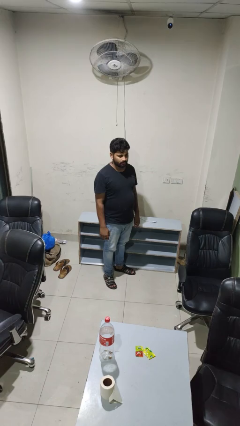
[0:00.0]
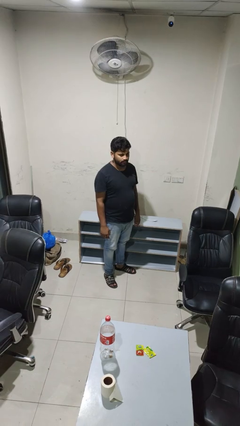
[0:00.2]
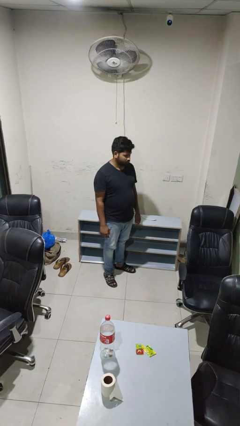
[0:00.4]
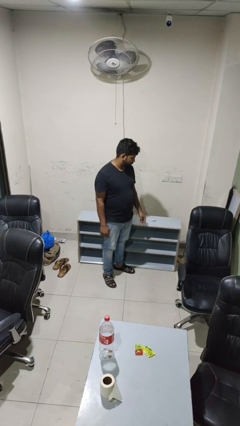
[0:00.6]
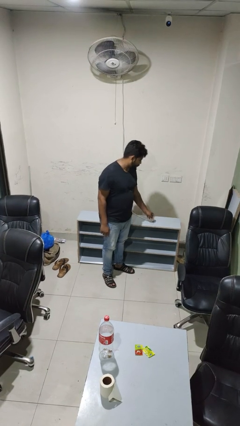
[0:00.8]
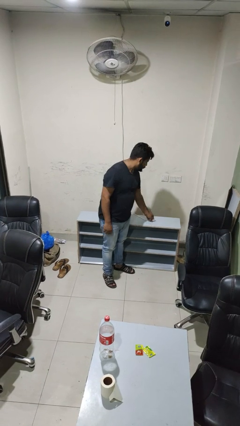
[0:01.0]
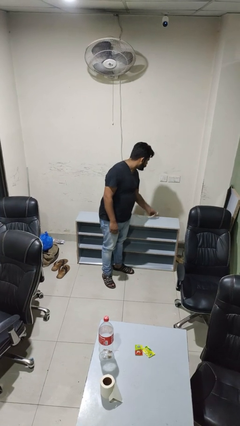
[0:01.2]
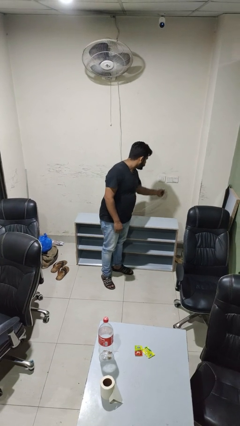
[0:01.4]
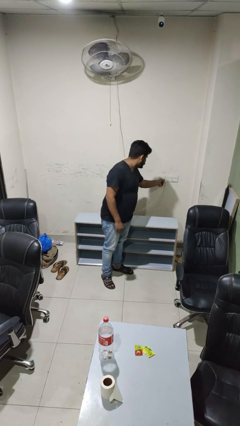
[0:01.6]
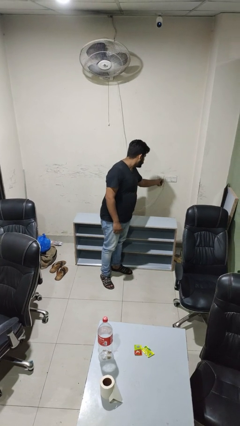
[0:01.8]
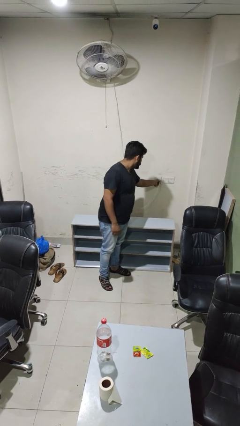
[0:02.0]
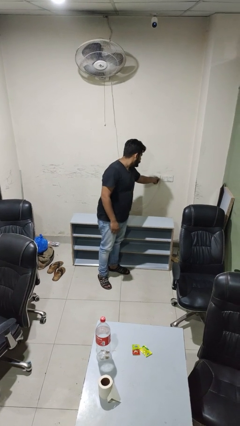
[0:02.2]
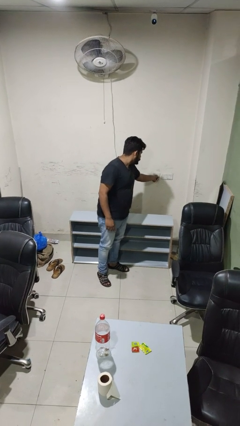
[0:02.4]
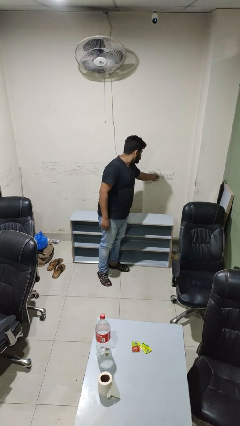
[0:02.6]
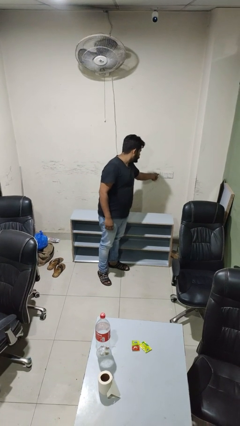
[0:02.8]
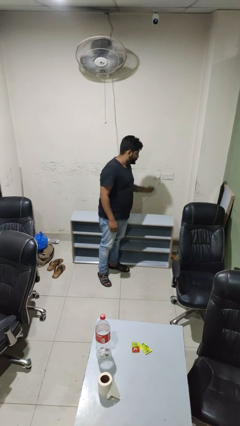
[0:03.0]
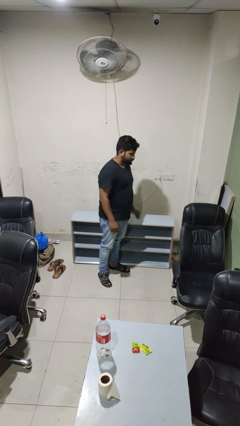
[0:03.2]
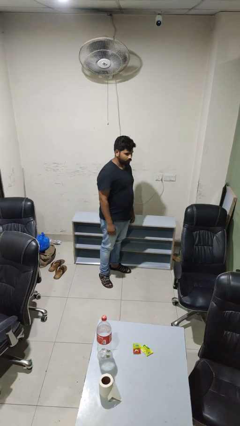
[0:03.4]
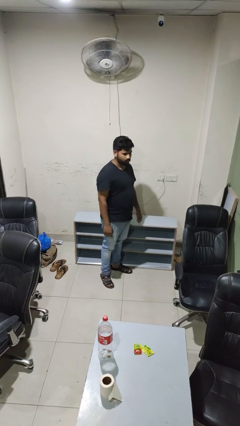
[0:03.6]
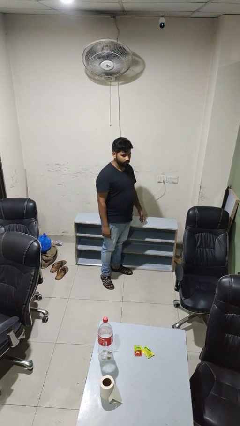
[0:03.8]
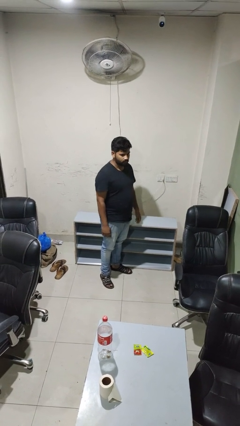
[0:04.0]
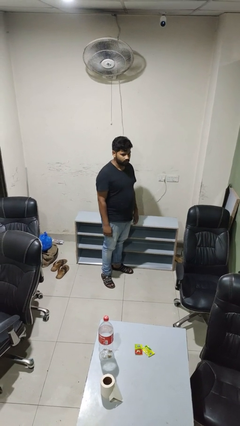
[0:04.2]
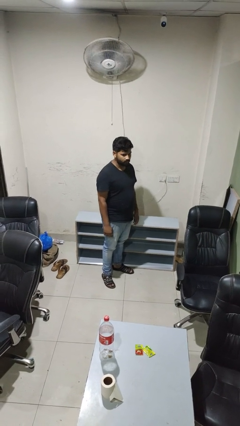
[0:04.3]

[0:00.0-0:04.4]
person plugs into electrical socket

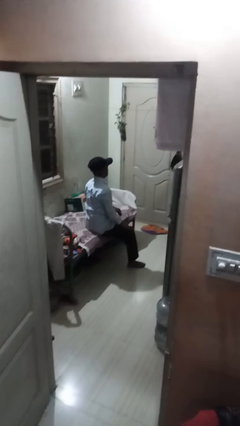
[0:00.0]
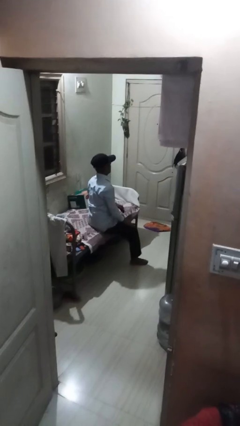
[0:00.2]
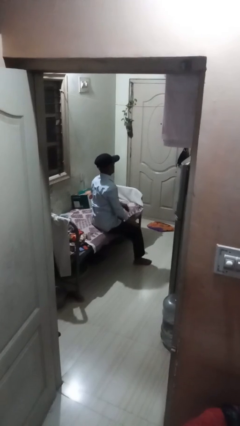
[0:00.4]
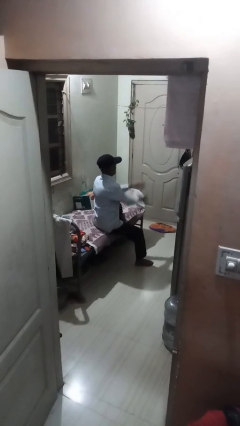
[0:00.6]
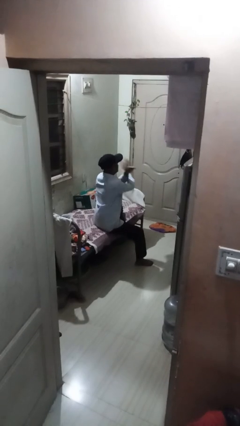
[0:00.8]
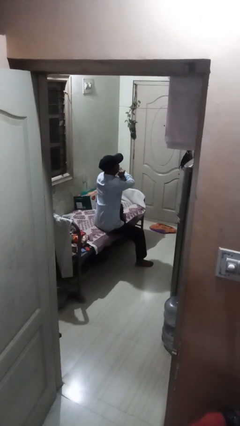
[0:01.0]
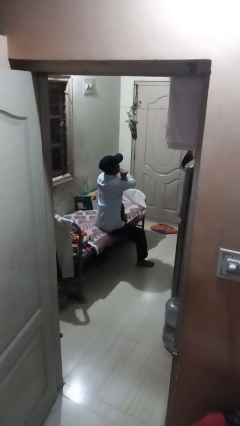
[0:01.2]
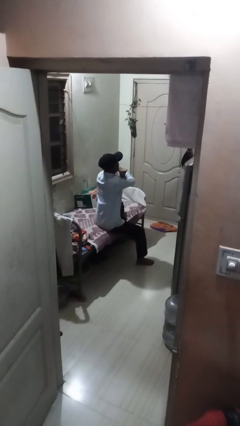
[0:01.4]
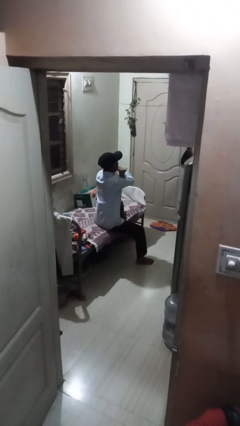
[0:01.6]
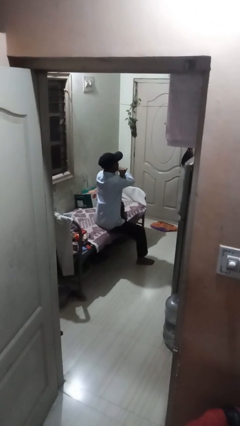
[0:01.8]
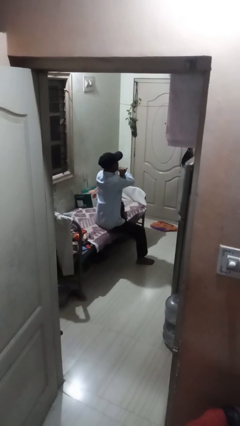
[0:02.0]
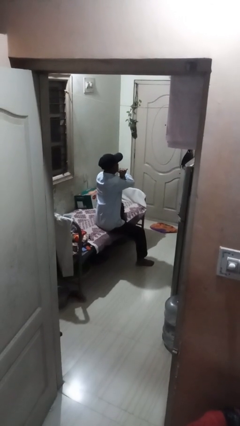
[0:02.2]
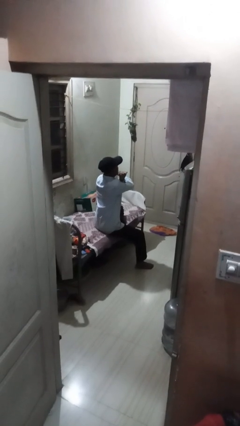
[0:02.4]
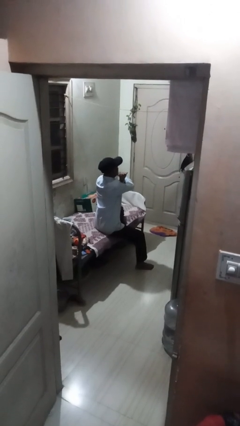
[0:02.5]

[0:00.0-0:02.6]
person gestures arms x

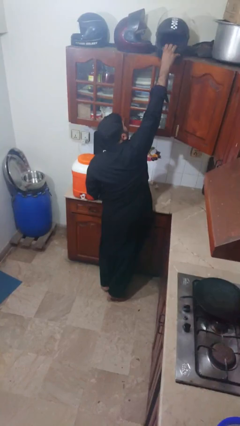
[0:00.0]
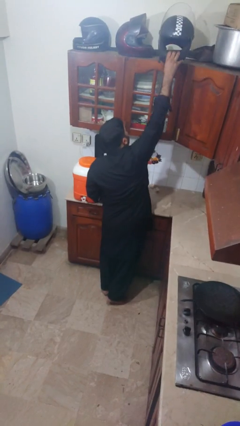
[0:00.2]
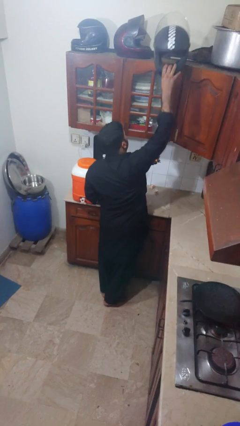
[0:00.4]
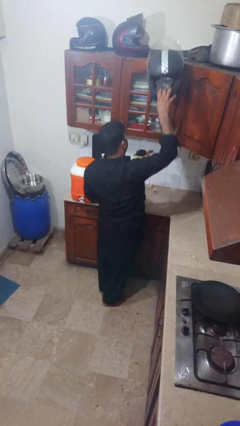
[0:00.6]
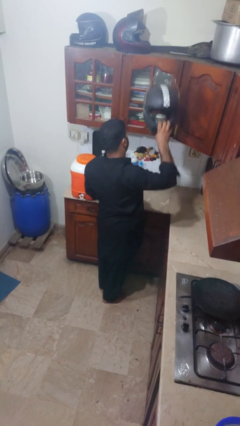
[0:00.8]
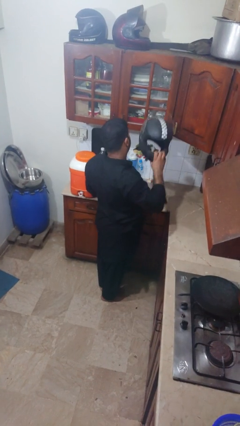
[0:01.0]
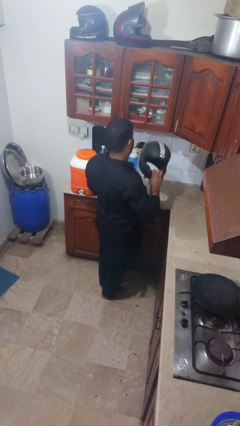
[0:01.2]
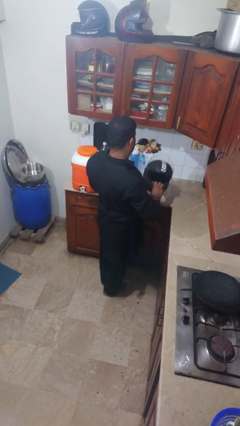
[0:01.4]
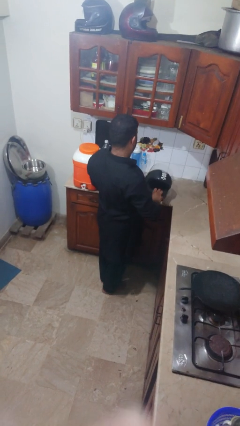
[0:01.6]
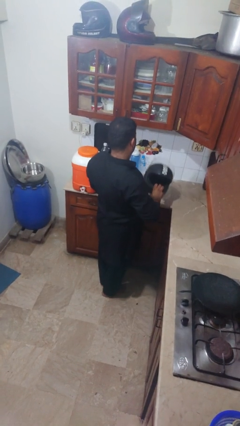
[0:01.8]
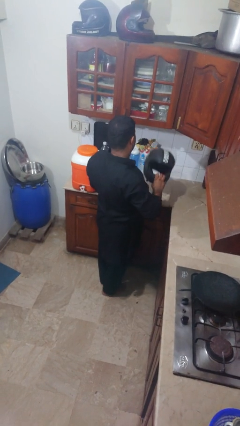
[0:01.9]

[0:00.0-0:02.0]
person picks up object from shelf

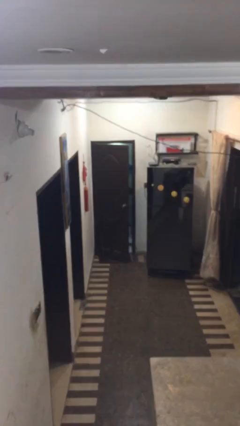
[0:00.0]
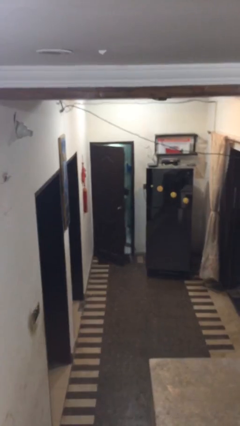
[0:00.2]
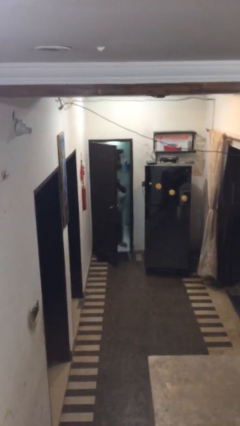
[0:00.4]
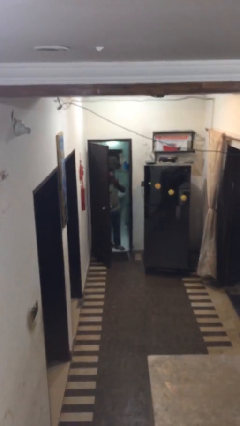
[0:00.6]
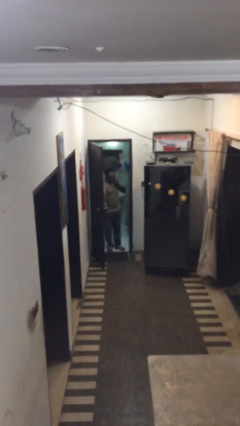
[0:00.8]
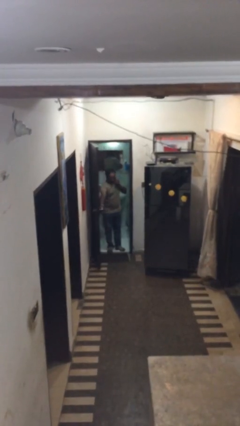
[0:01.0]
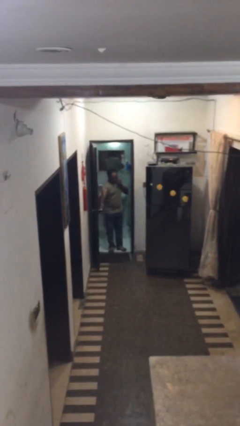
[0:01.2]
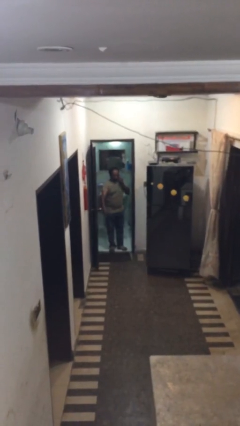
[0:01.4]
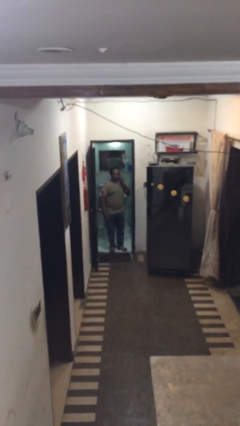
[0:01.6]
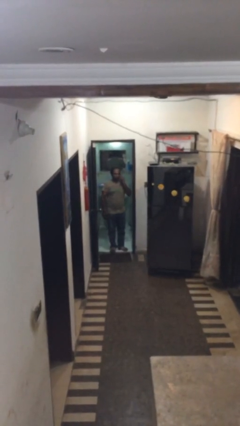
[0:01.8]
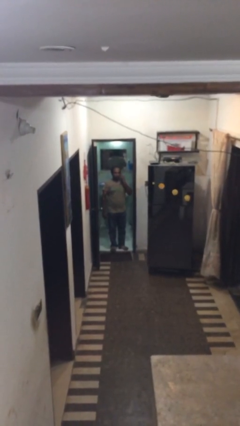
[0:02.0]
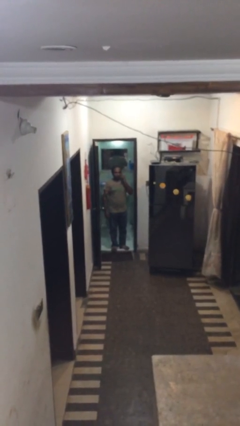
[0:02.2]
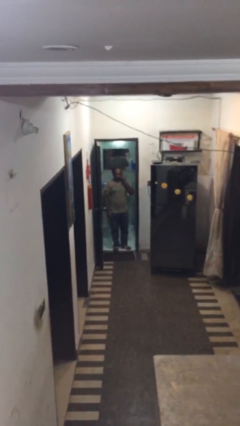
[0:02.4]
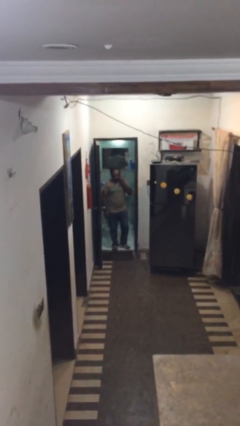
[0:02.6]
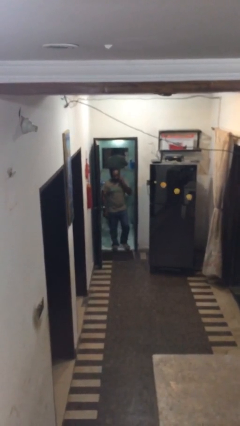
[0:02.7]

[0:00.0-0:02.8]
person opens facility door

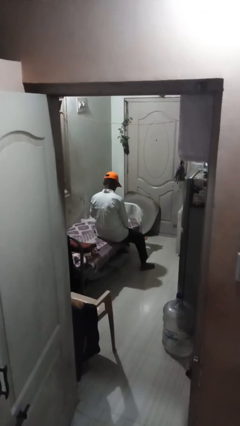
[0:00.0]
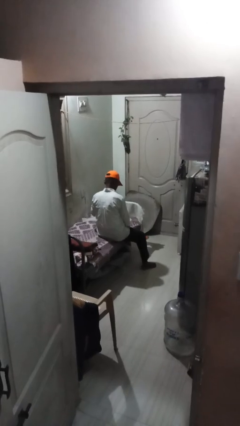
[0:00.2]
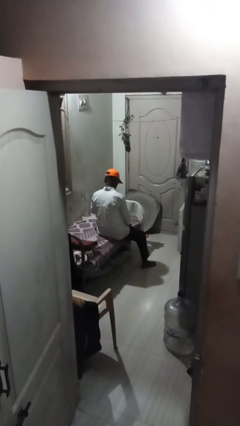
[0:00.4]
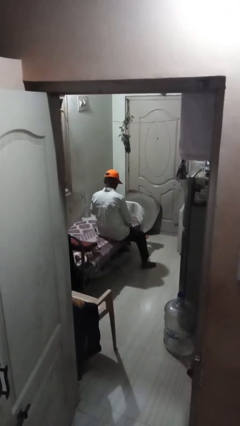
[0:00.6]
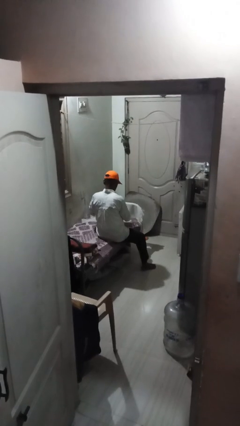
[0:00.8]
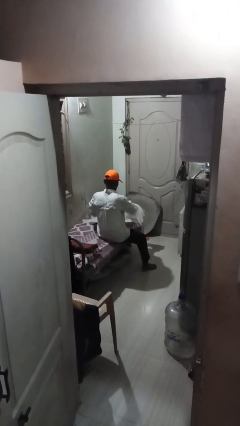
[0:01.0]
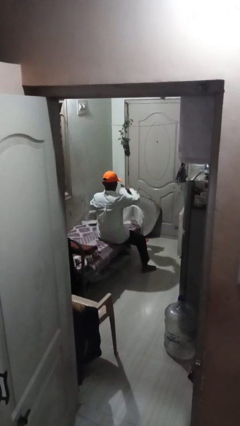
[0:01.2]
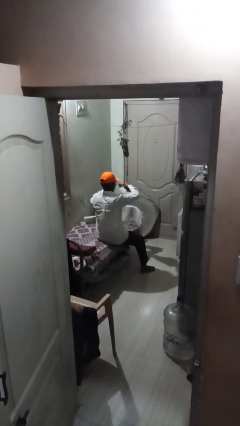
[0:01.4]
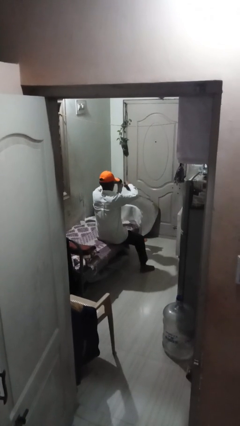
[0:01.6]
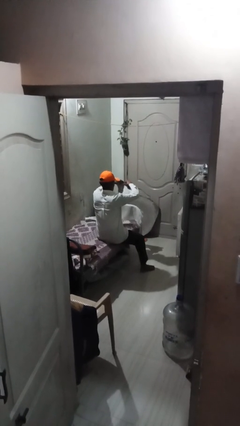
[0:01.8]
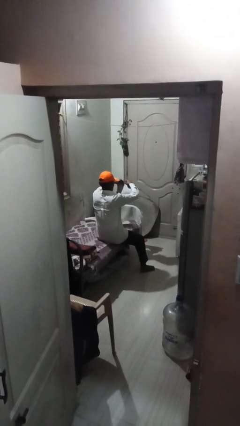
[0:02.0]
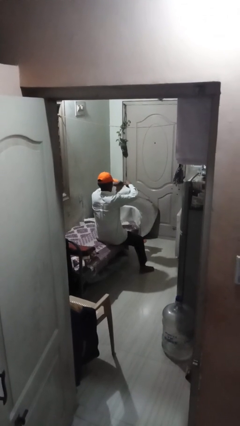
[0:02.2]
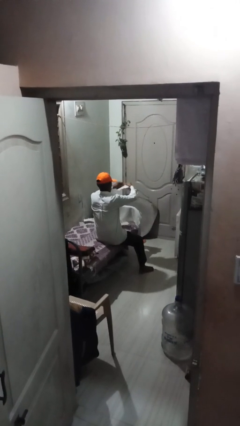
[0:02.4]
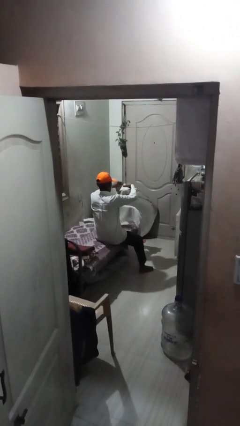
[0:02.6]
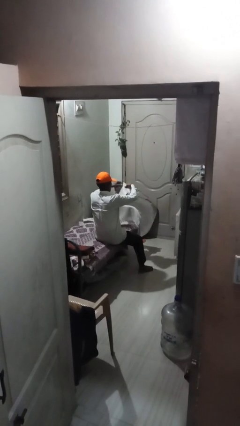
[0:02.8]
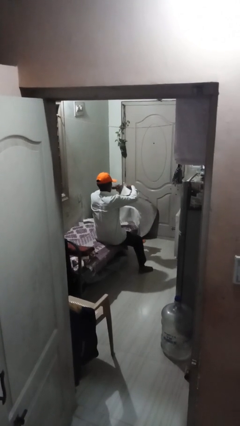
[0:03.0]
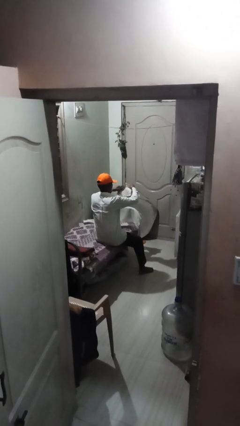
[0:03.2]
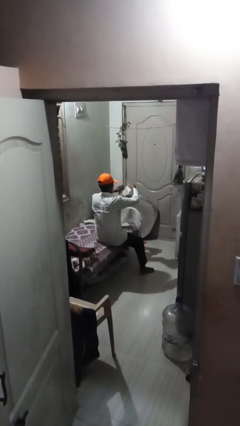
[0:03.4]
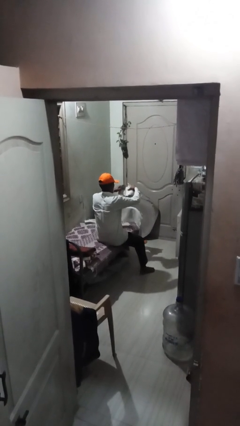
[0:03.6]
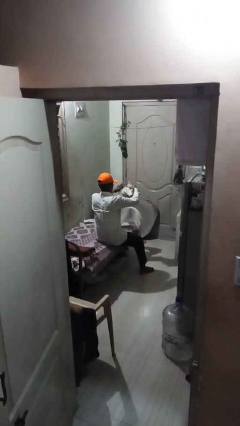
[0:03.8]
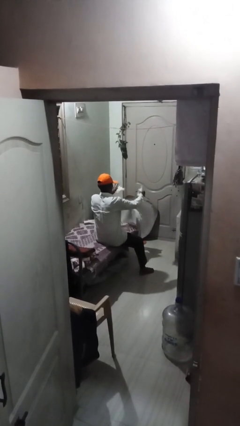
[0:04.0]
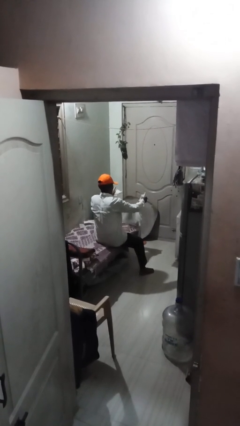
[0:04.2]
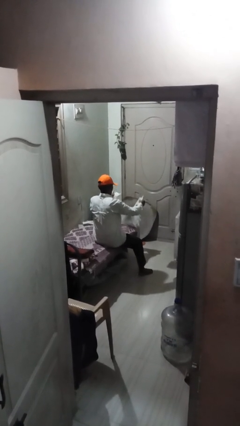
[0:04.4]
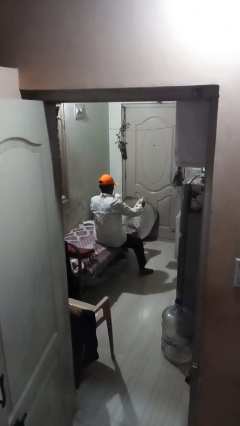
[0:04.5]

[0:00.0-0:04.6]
person tears paper

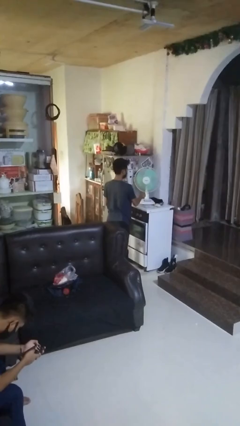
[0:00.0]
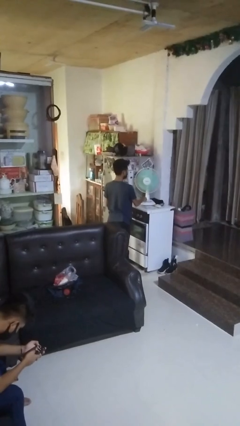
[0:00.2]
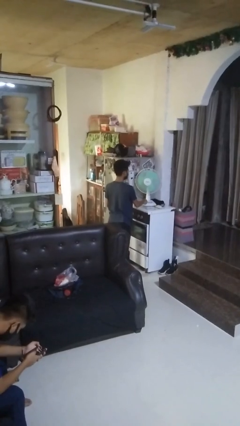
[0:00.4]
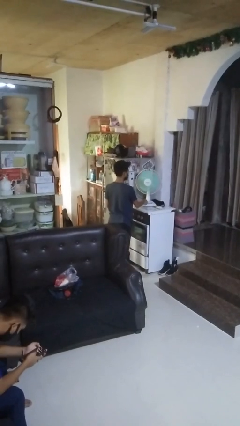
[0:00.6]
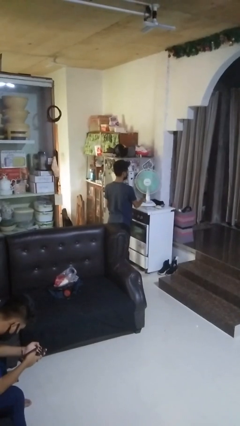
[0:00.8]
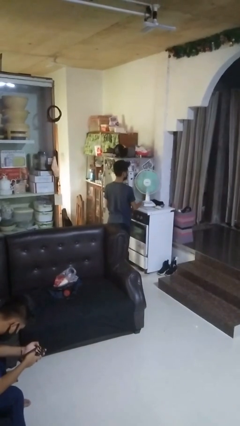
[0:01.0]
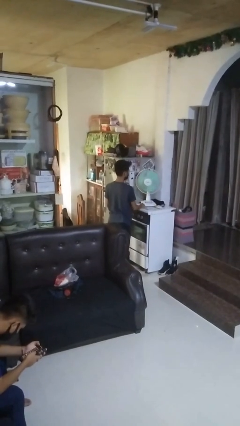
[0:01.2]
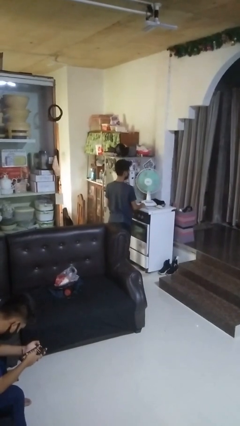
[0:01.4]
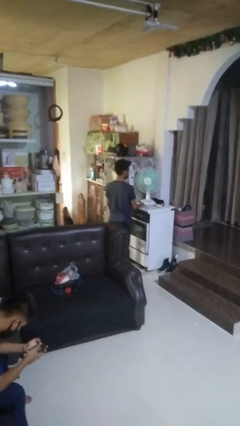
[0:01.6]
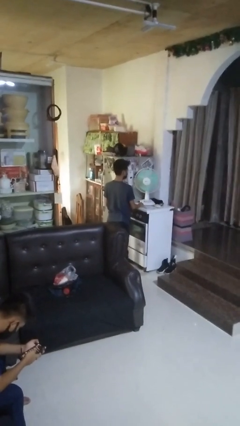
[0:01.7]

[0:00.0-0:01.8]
person turns off fan
